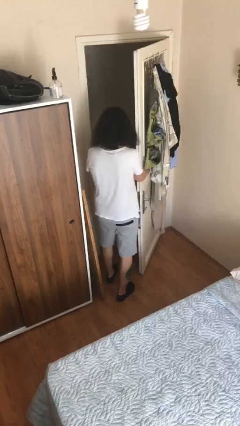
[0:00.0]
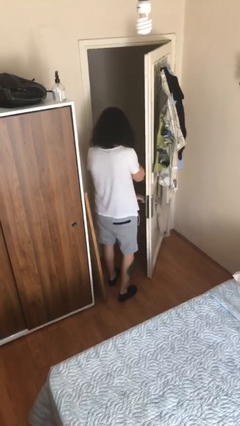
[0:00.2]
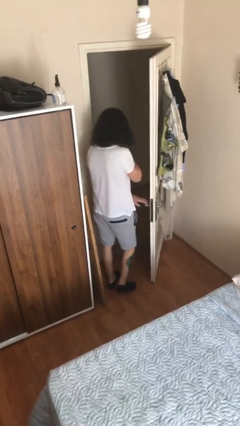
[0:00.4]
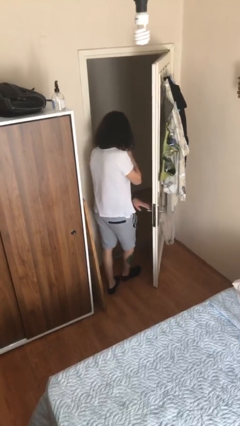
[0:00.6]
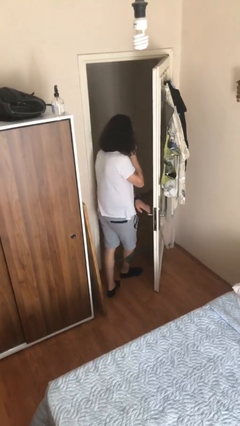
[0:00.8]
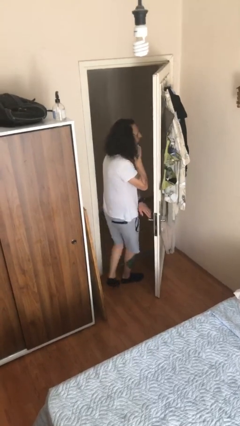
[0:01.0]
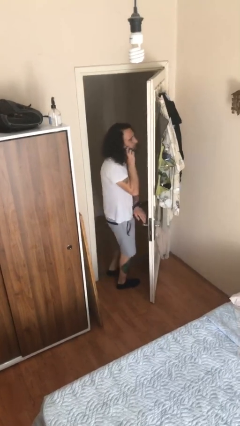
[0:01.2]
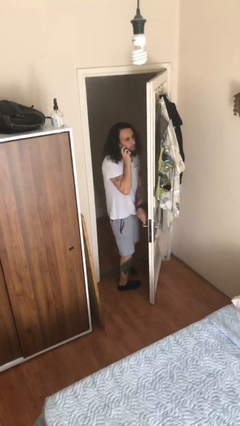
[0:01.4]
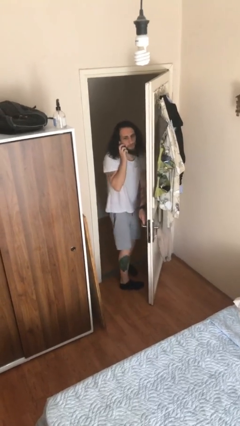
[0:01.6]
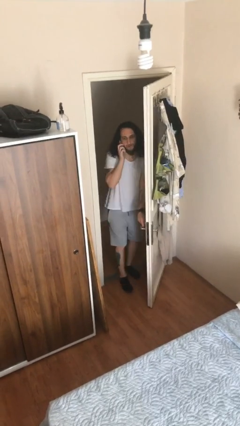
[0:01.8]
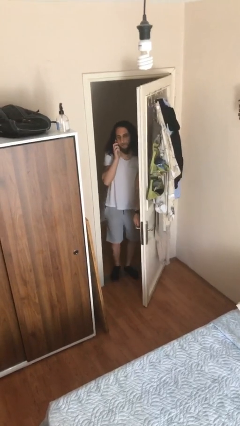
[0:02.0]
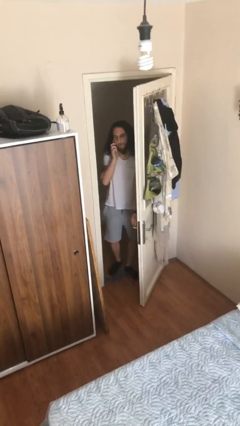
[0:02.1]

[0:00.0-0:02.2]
person exits scene through structure

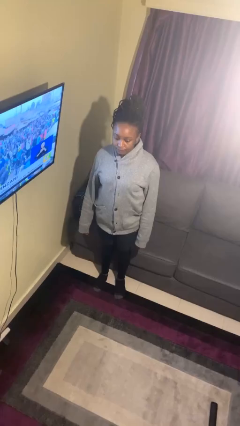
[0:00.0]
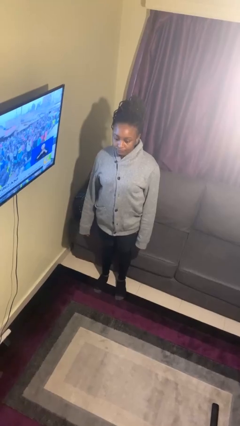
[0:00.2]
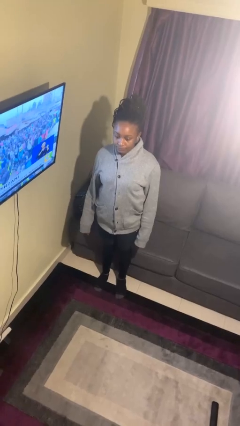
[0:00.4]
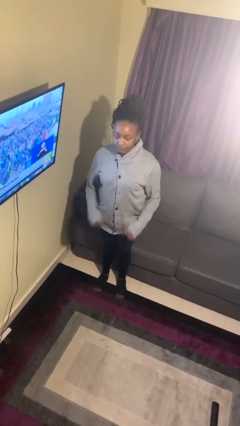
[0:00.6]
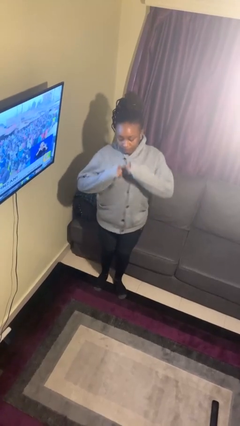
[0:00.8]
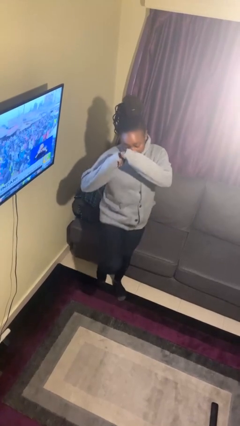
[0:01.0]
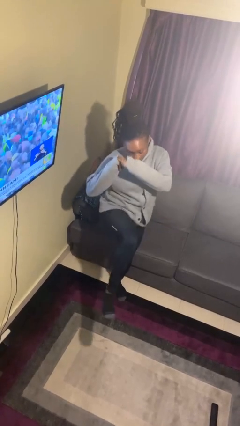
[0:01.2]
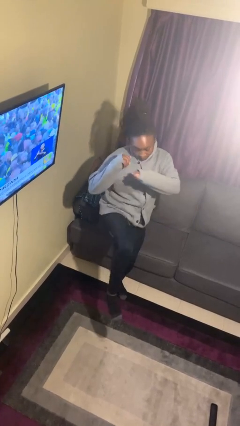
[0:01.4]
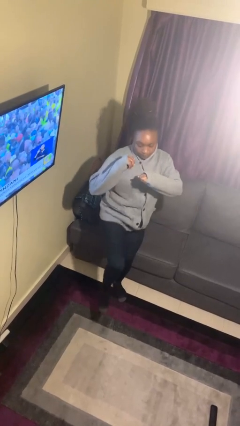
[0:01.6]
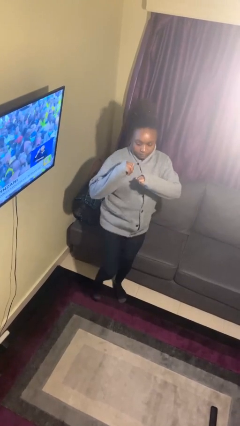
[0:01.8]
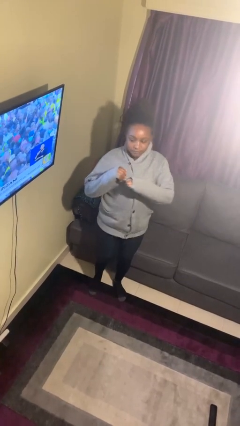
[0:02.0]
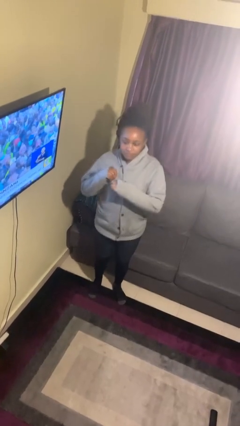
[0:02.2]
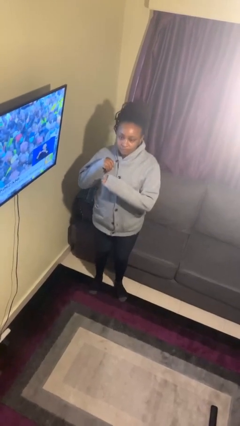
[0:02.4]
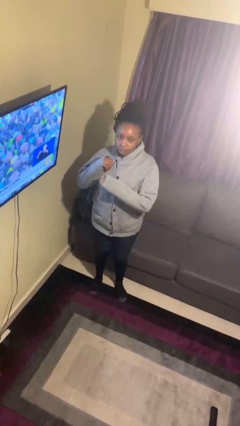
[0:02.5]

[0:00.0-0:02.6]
person karate kicks

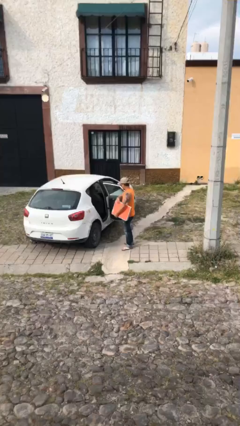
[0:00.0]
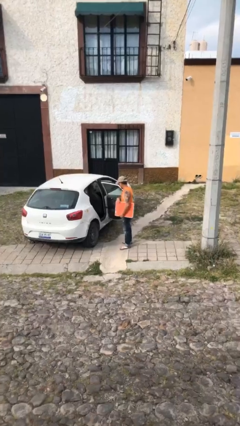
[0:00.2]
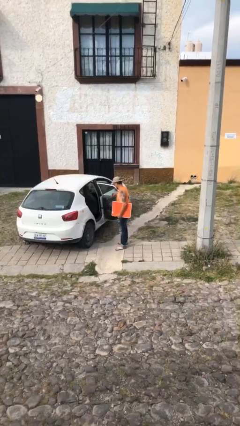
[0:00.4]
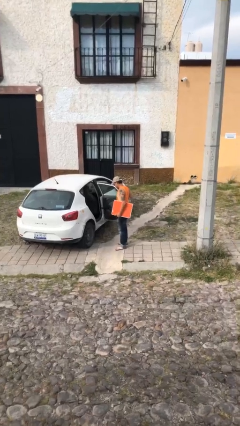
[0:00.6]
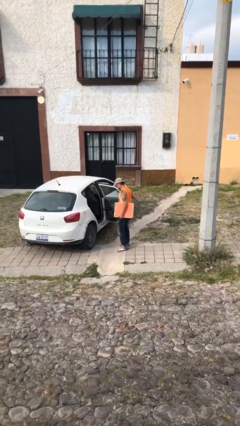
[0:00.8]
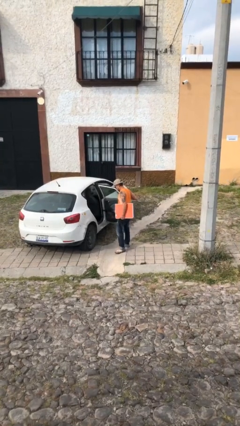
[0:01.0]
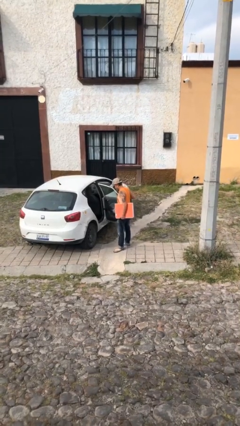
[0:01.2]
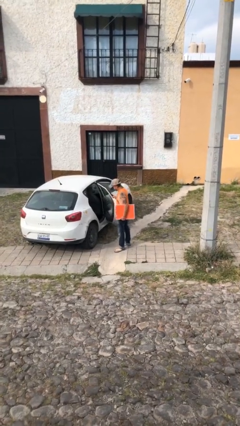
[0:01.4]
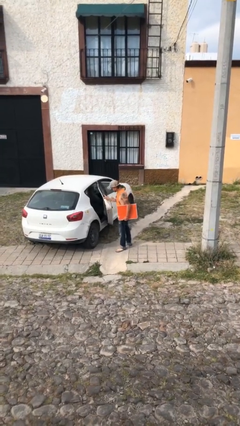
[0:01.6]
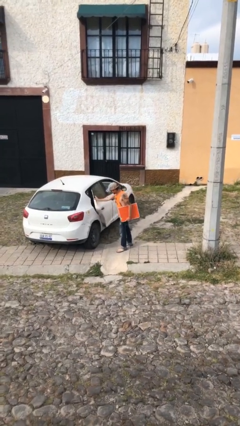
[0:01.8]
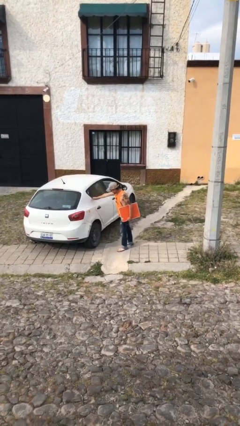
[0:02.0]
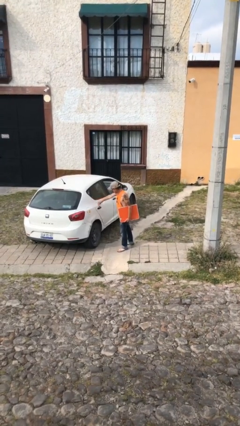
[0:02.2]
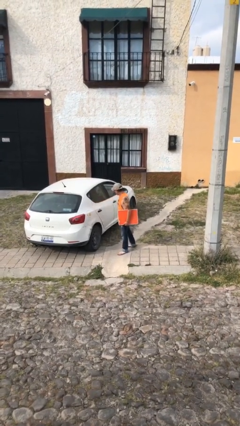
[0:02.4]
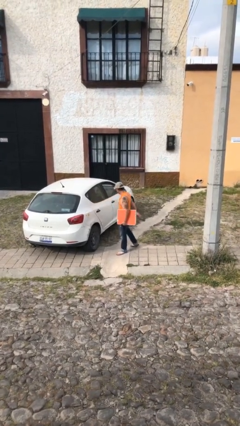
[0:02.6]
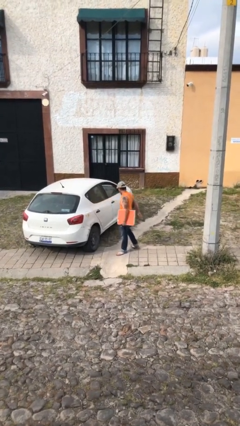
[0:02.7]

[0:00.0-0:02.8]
person closes car door

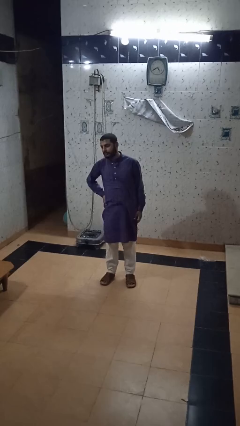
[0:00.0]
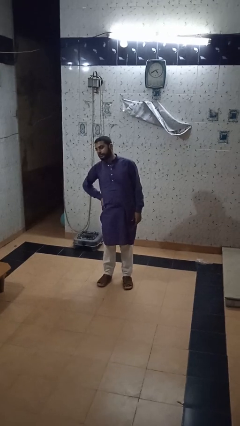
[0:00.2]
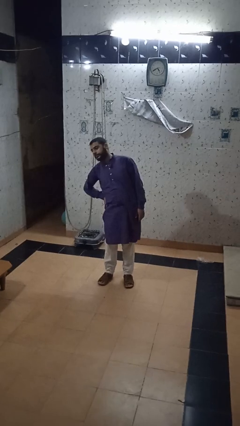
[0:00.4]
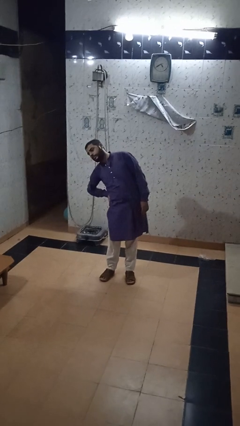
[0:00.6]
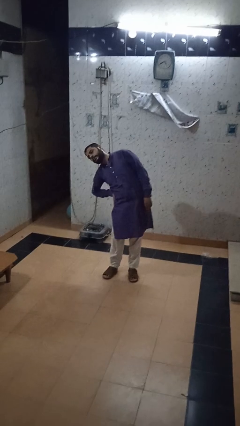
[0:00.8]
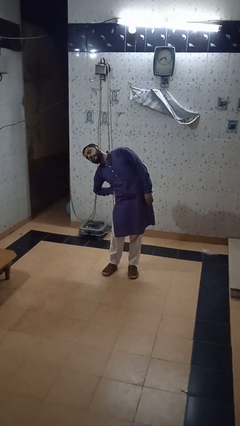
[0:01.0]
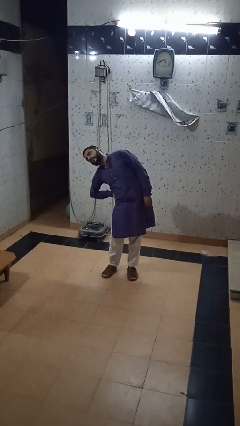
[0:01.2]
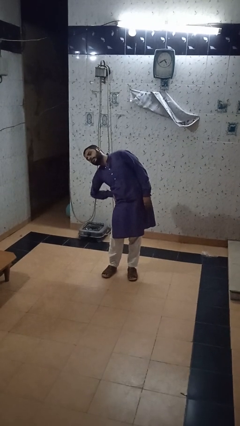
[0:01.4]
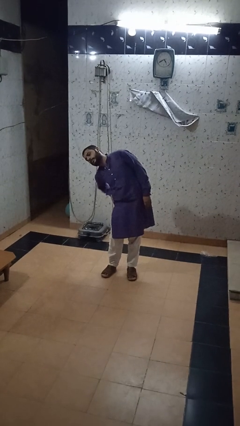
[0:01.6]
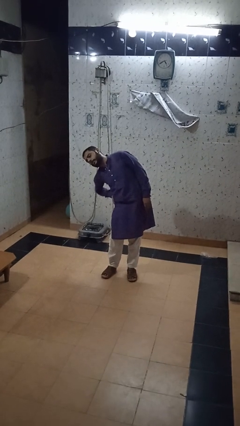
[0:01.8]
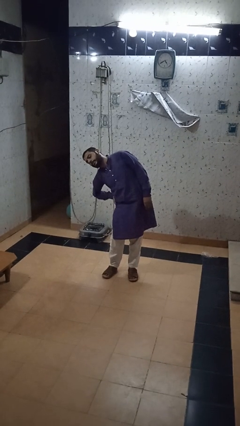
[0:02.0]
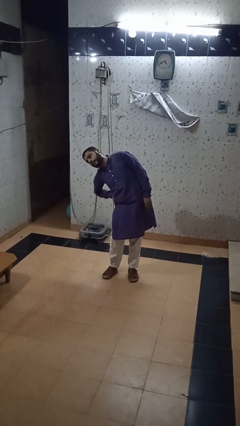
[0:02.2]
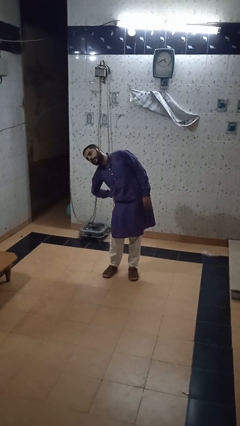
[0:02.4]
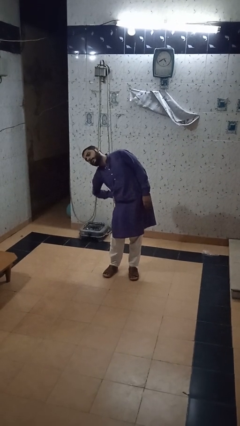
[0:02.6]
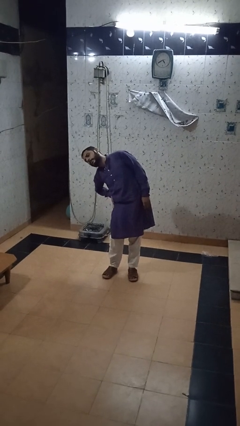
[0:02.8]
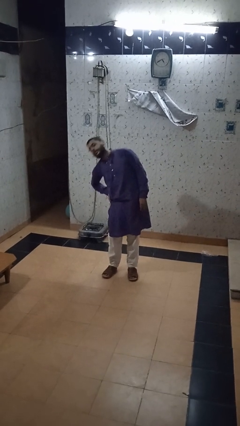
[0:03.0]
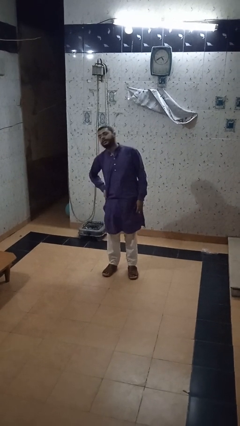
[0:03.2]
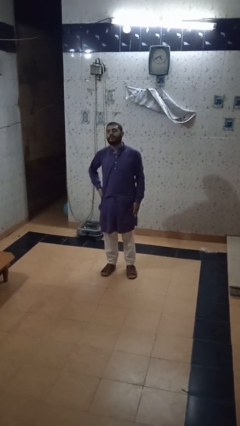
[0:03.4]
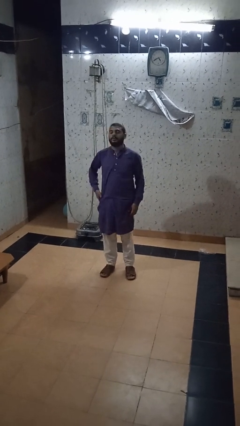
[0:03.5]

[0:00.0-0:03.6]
person stretches arms to side

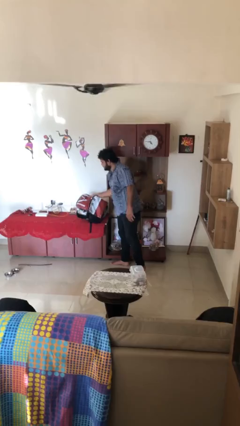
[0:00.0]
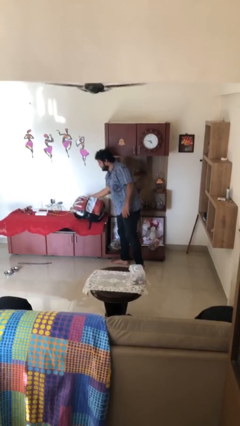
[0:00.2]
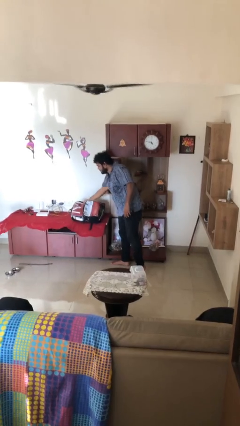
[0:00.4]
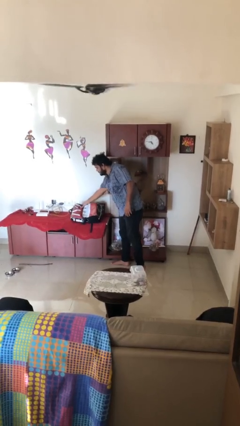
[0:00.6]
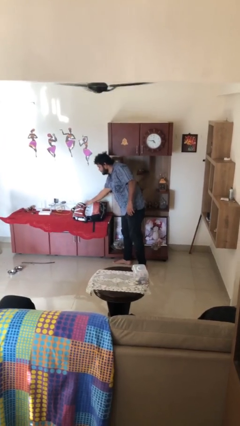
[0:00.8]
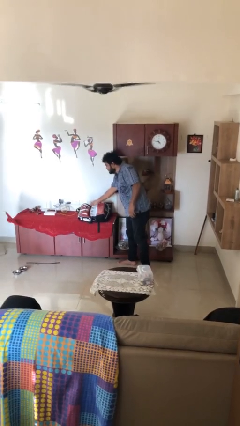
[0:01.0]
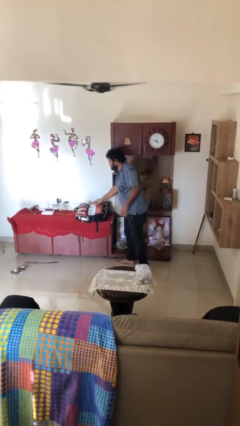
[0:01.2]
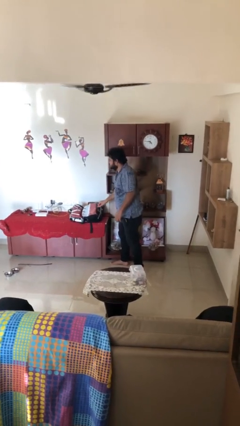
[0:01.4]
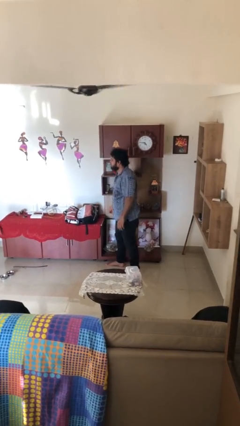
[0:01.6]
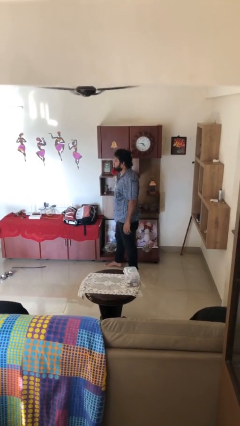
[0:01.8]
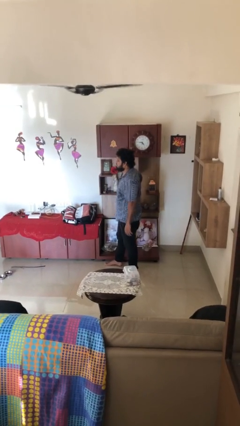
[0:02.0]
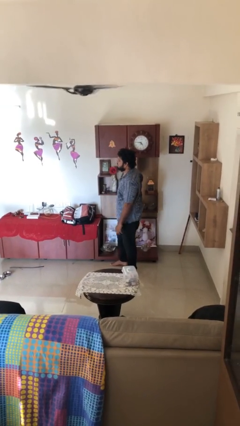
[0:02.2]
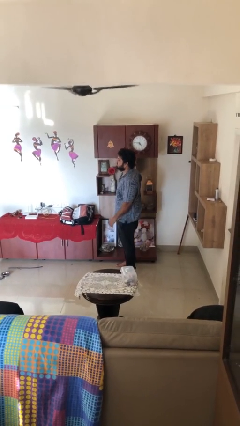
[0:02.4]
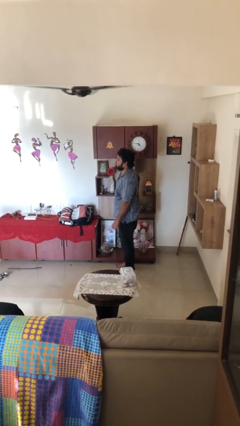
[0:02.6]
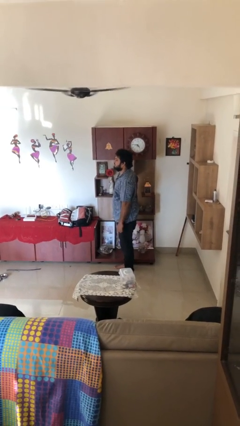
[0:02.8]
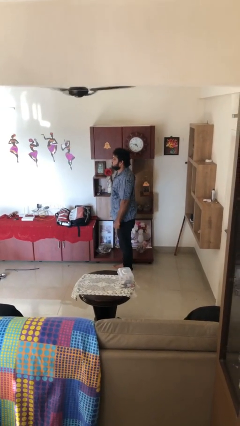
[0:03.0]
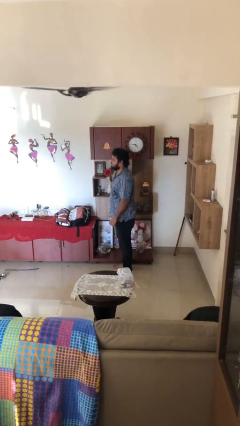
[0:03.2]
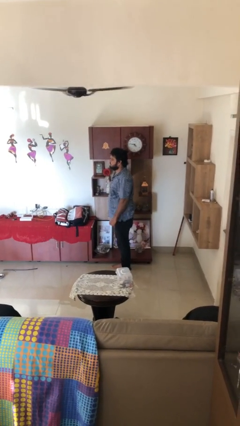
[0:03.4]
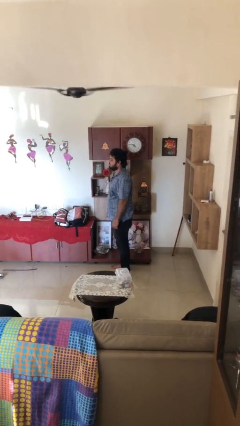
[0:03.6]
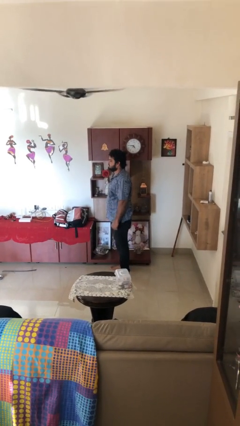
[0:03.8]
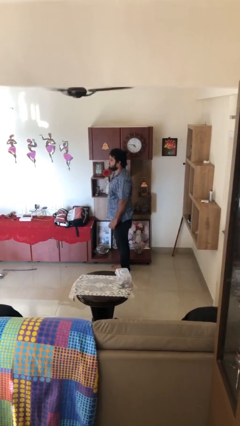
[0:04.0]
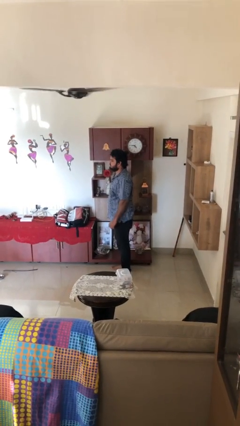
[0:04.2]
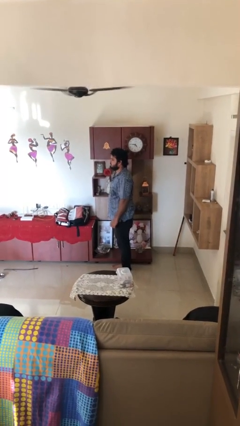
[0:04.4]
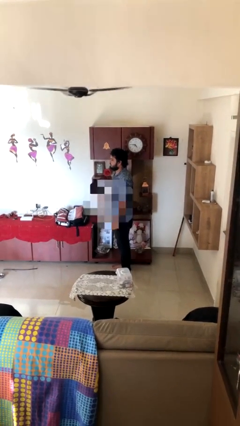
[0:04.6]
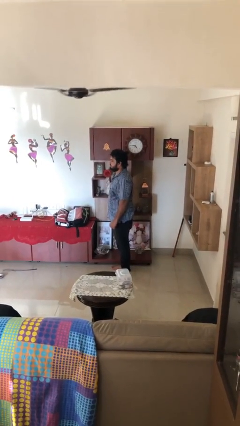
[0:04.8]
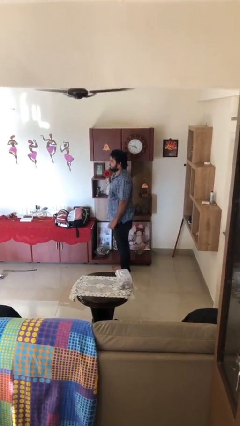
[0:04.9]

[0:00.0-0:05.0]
person puts down object on table

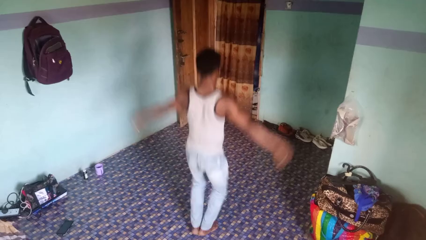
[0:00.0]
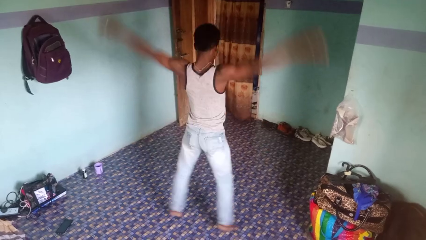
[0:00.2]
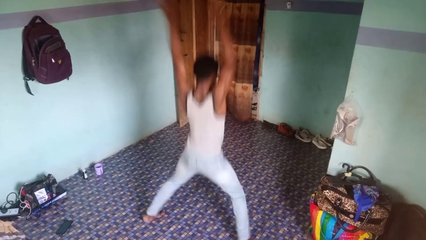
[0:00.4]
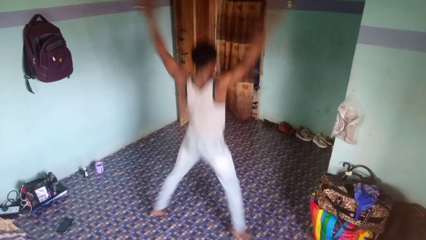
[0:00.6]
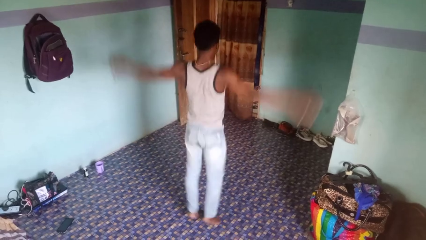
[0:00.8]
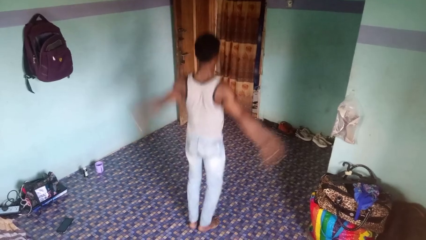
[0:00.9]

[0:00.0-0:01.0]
person exercises with jumping jacks
